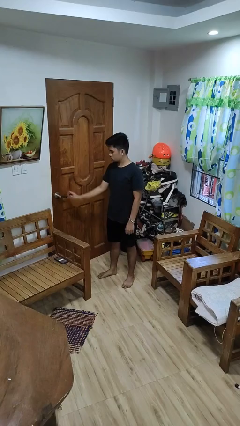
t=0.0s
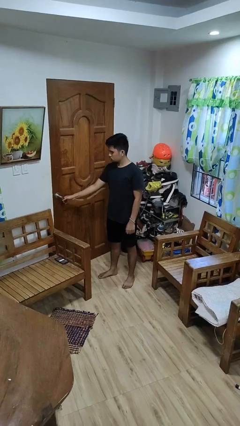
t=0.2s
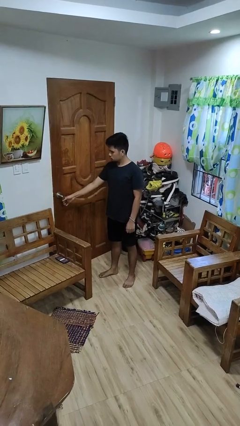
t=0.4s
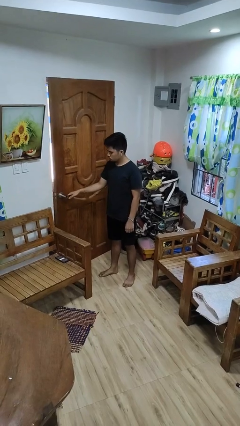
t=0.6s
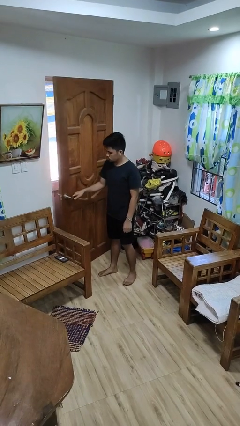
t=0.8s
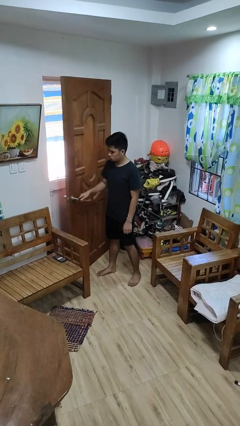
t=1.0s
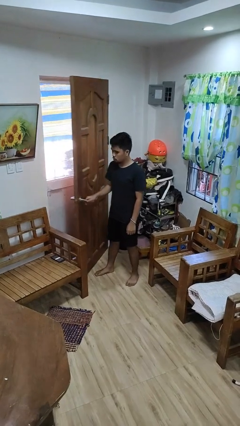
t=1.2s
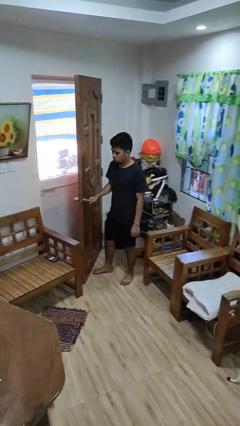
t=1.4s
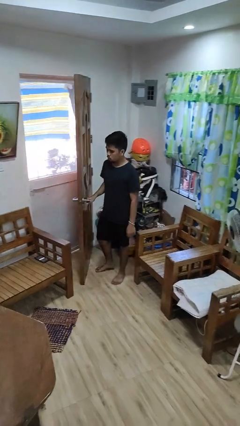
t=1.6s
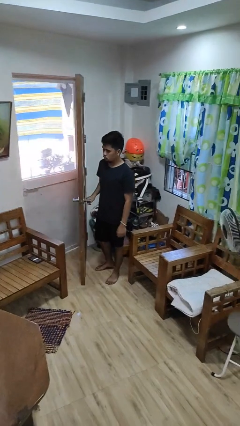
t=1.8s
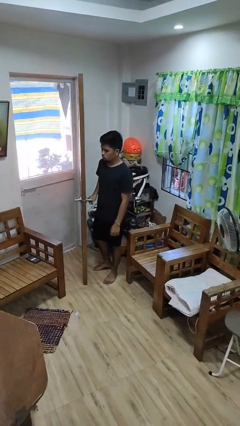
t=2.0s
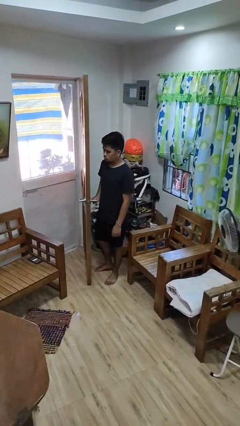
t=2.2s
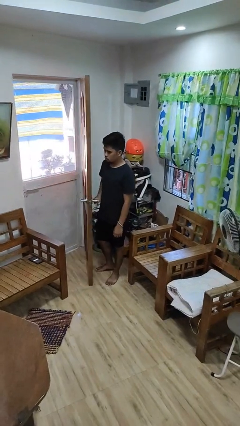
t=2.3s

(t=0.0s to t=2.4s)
person opens facility door

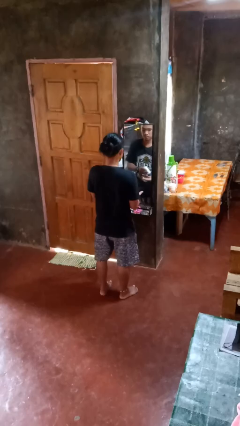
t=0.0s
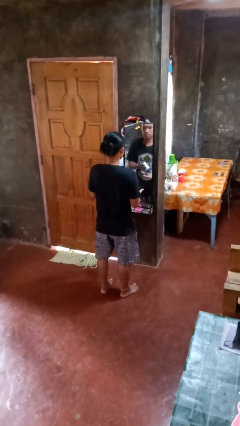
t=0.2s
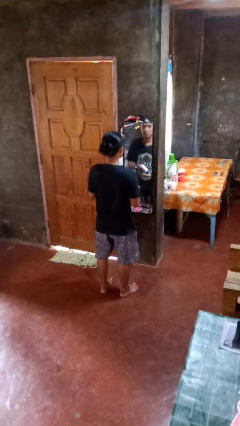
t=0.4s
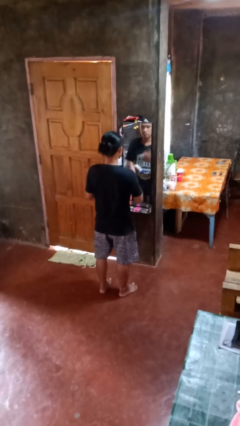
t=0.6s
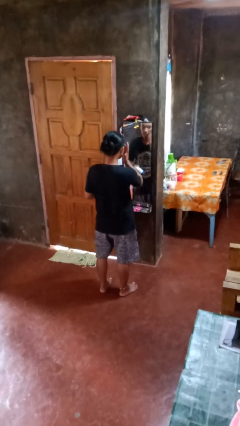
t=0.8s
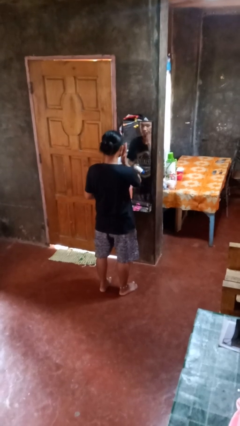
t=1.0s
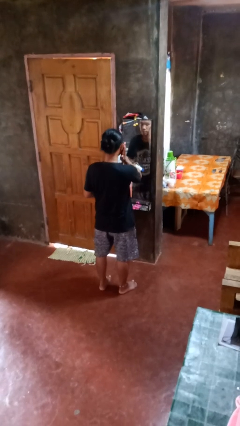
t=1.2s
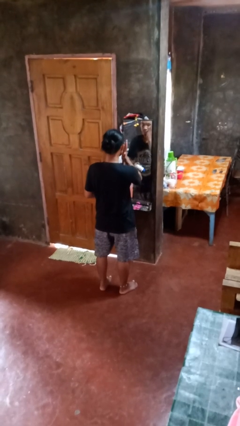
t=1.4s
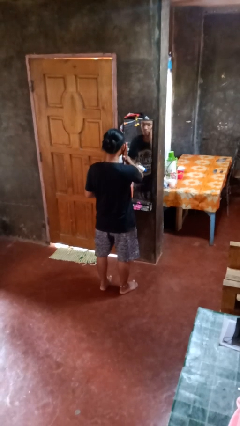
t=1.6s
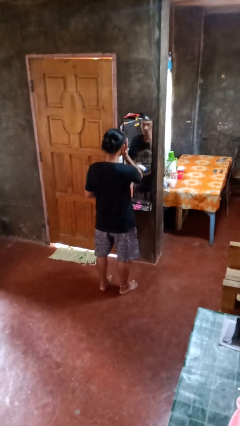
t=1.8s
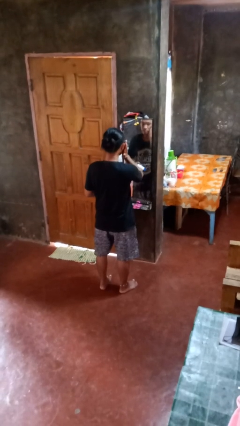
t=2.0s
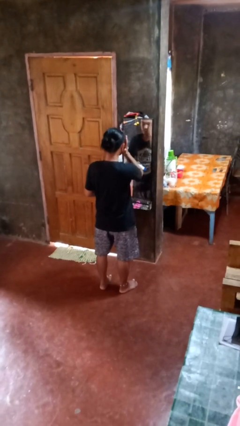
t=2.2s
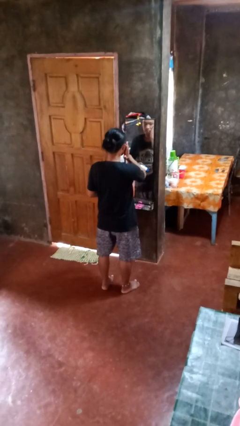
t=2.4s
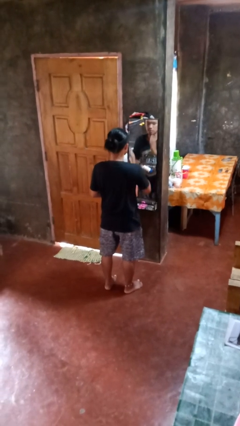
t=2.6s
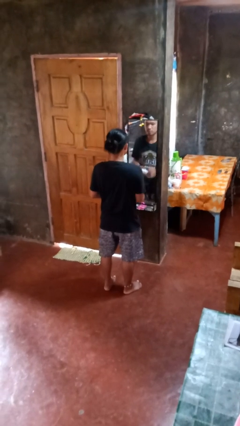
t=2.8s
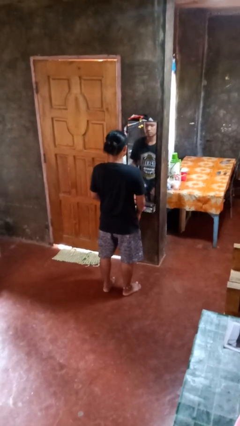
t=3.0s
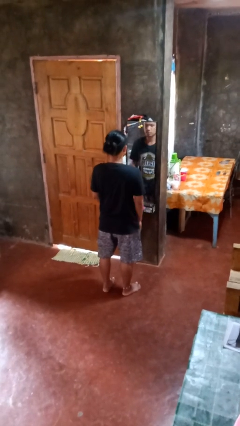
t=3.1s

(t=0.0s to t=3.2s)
person applies eye makeup

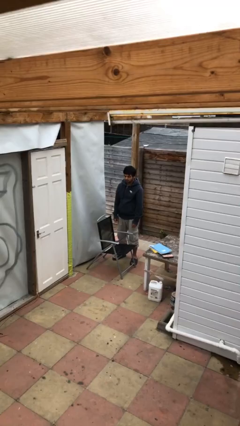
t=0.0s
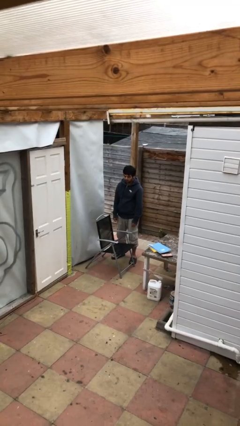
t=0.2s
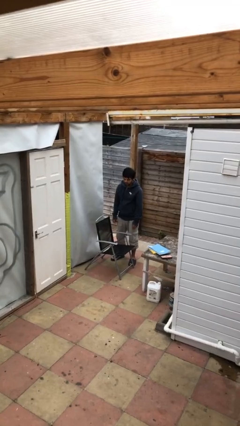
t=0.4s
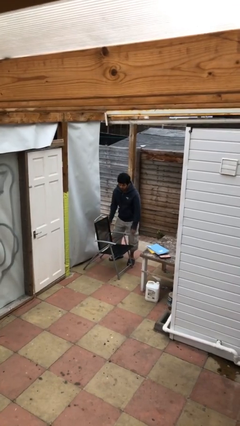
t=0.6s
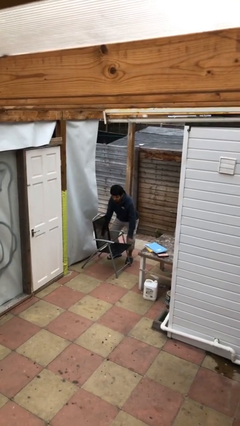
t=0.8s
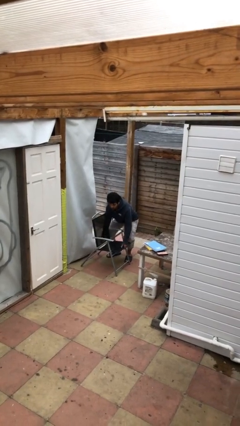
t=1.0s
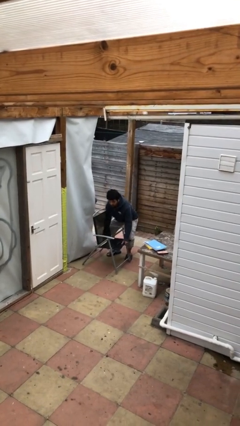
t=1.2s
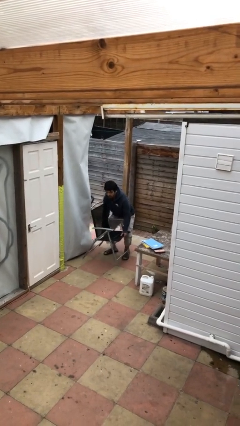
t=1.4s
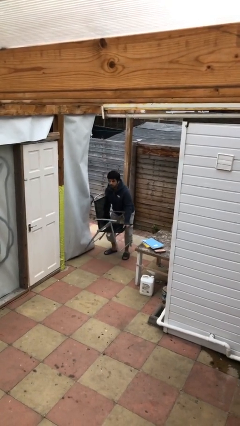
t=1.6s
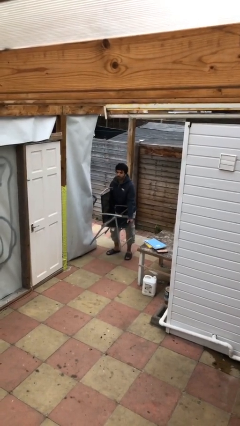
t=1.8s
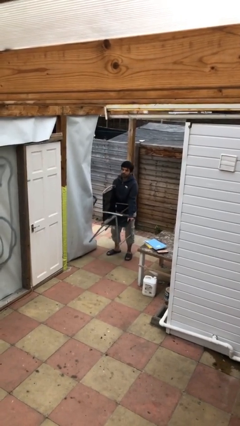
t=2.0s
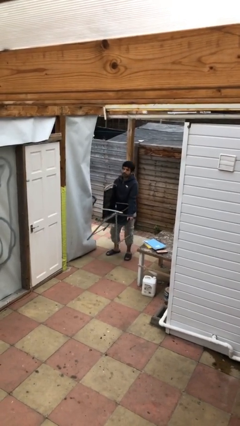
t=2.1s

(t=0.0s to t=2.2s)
person picks up object from floor

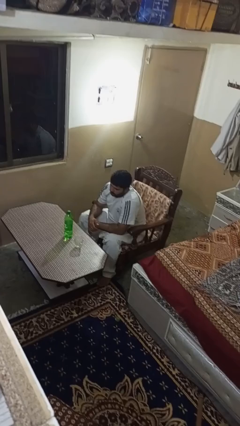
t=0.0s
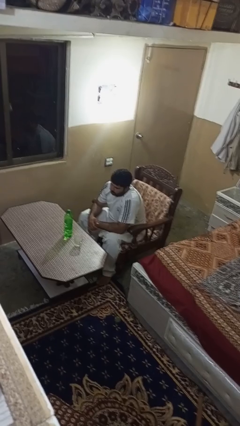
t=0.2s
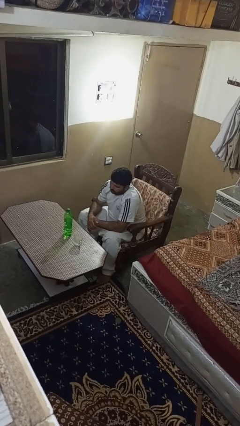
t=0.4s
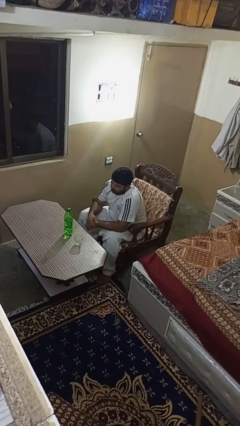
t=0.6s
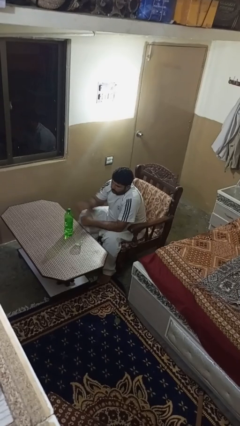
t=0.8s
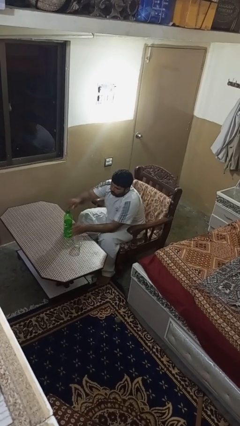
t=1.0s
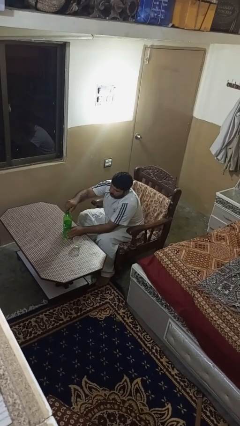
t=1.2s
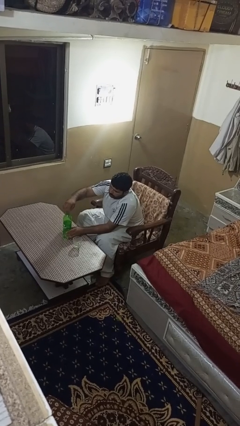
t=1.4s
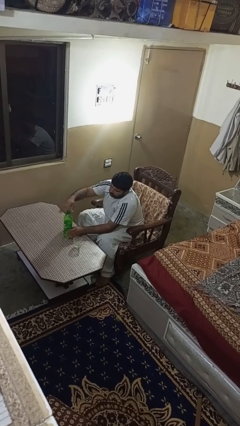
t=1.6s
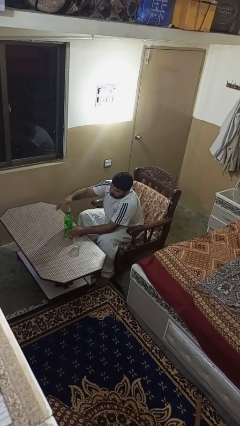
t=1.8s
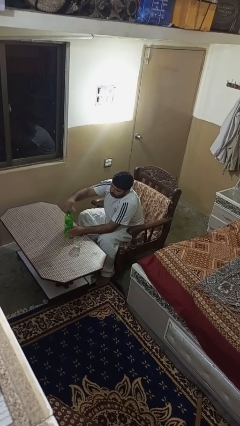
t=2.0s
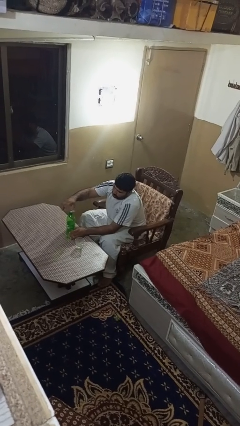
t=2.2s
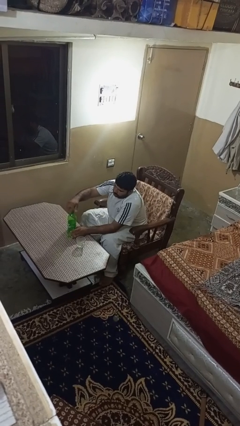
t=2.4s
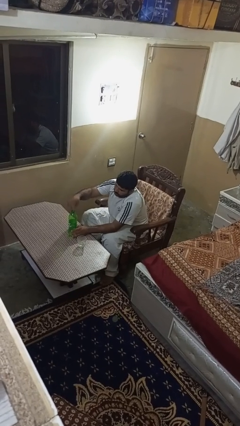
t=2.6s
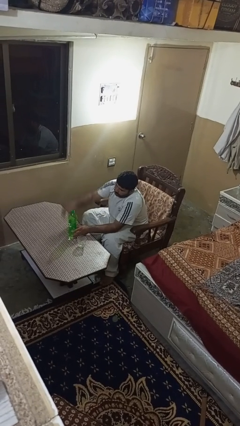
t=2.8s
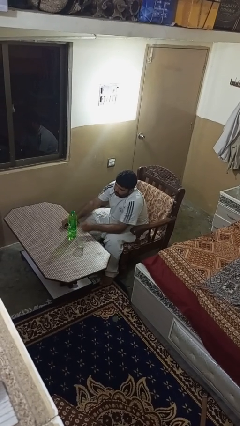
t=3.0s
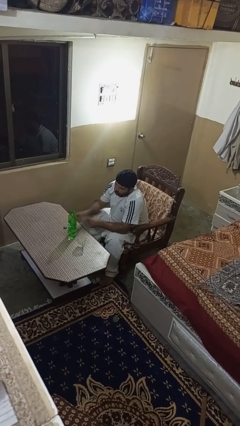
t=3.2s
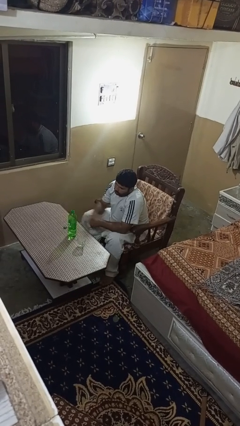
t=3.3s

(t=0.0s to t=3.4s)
person unscrews lid from bottle

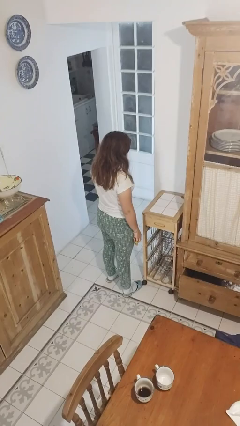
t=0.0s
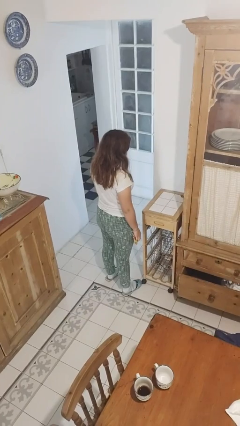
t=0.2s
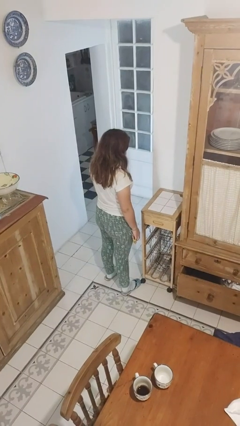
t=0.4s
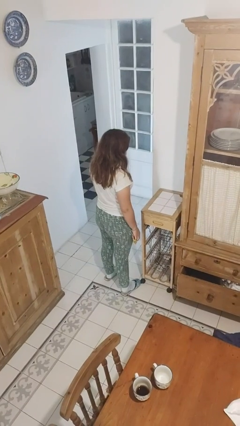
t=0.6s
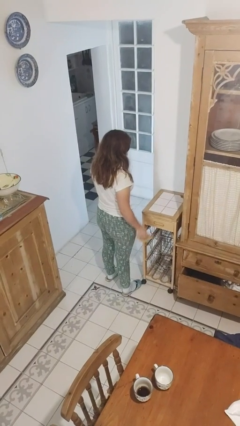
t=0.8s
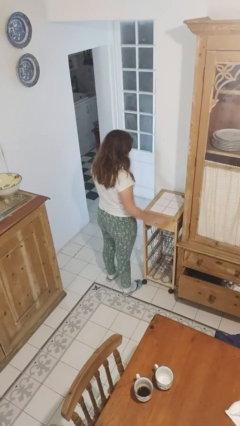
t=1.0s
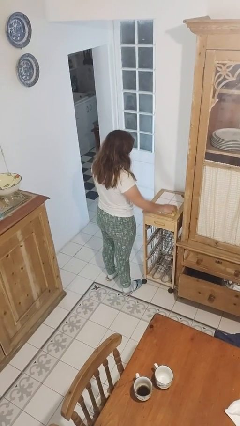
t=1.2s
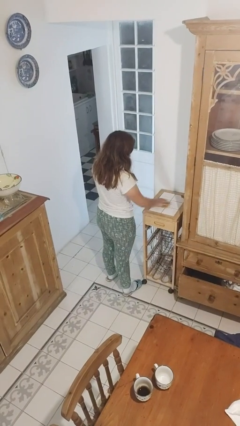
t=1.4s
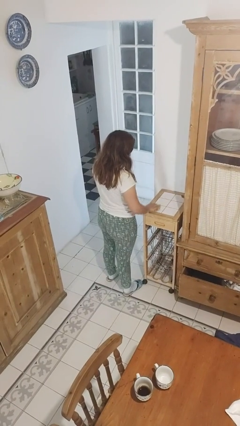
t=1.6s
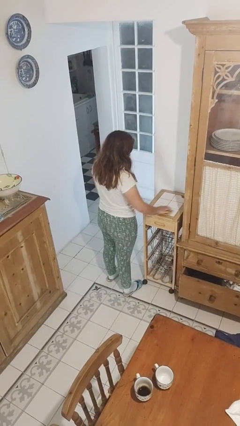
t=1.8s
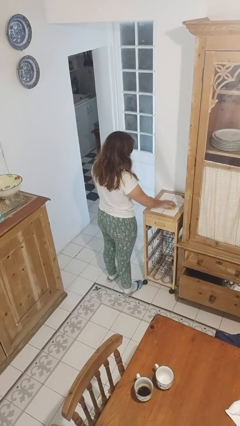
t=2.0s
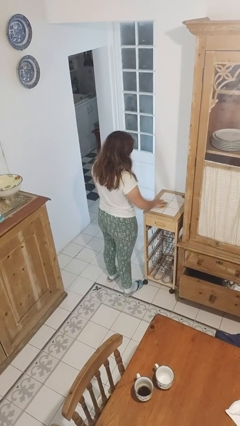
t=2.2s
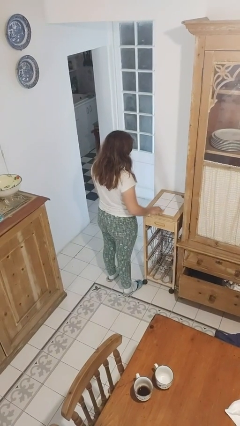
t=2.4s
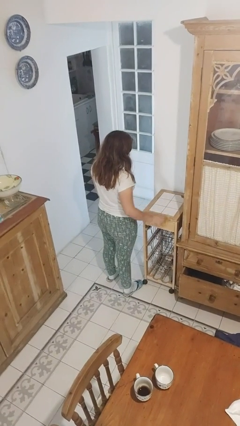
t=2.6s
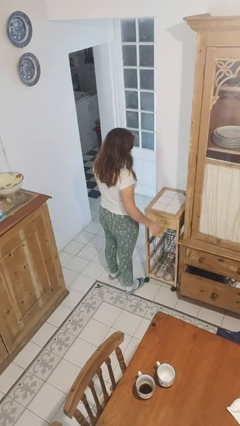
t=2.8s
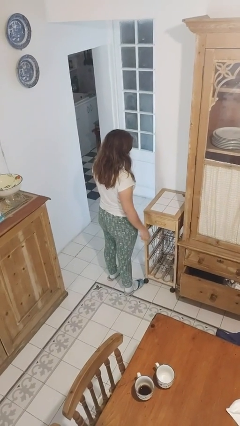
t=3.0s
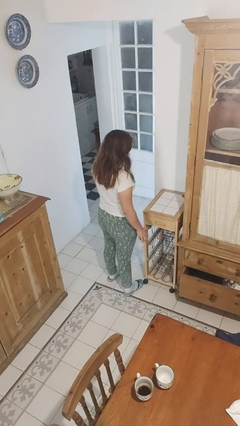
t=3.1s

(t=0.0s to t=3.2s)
person cleans table with rag

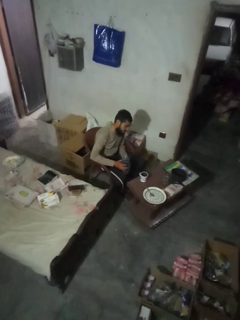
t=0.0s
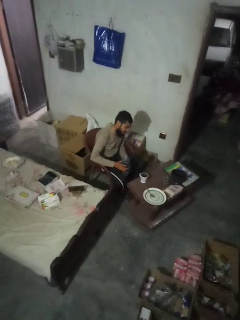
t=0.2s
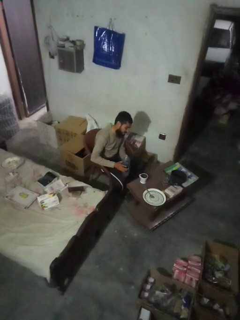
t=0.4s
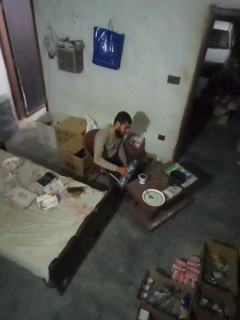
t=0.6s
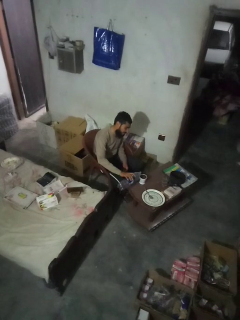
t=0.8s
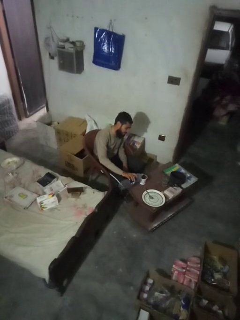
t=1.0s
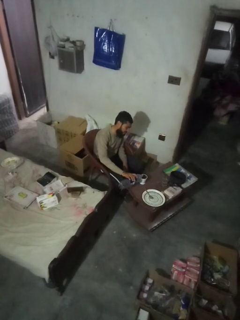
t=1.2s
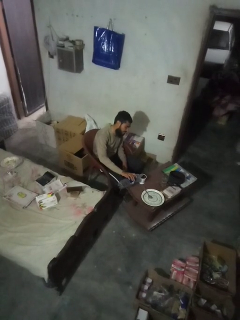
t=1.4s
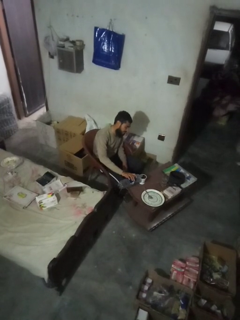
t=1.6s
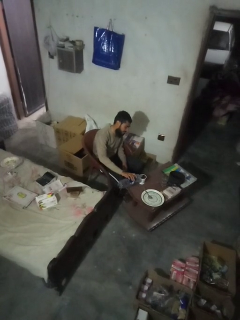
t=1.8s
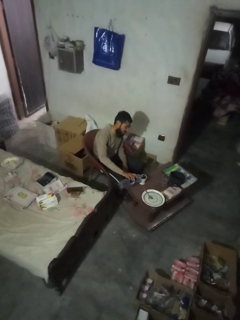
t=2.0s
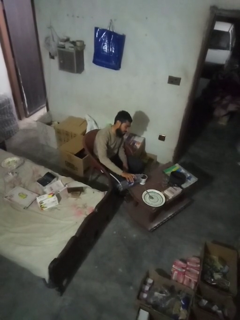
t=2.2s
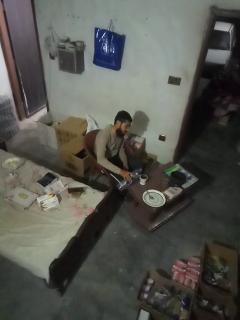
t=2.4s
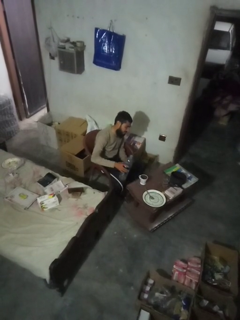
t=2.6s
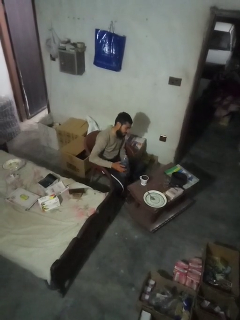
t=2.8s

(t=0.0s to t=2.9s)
person pours liquid into cup

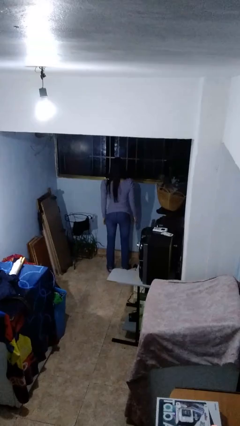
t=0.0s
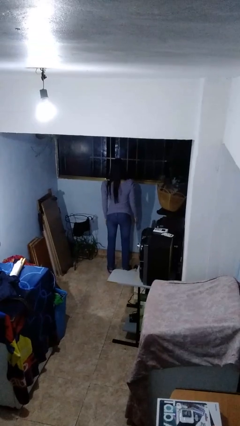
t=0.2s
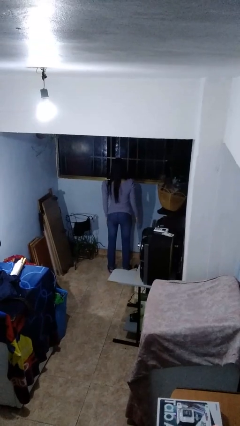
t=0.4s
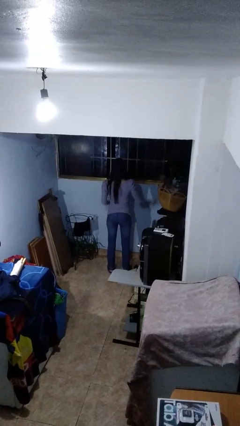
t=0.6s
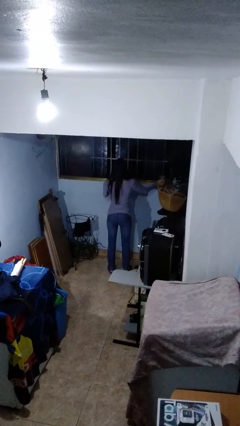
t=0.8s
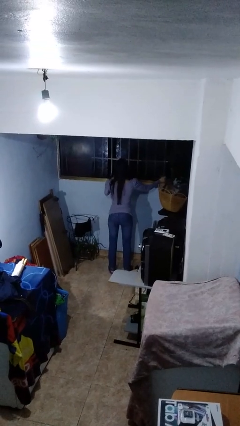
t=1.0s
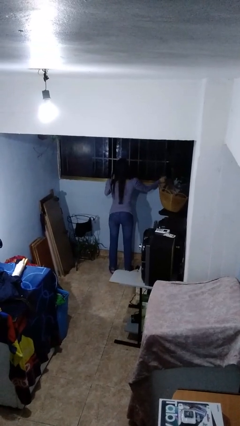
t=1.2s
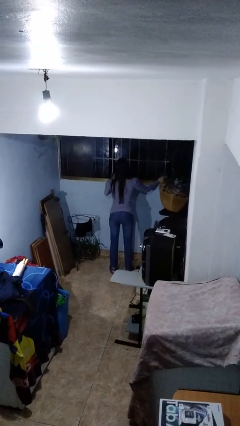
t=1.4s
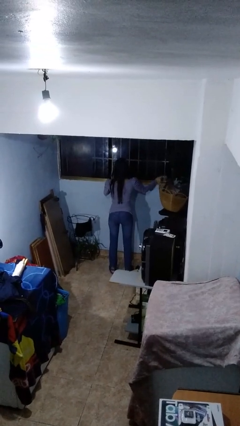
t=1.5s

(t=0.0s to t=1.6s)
person closes home window
